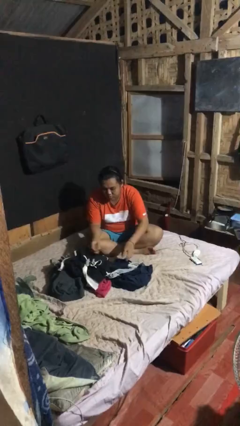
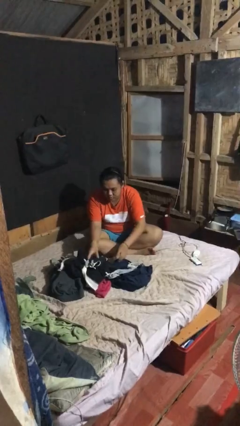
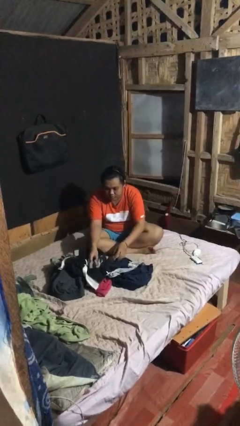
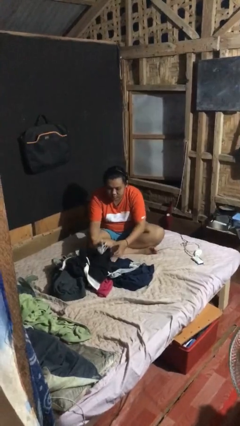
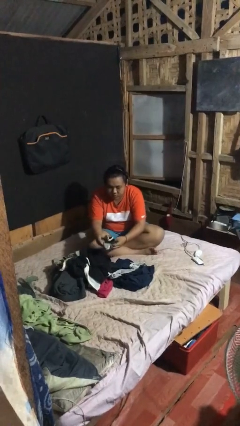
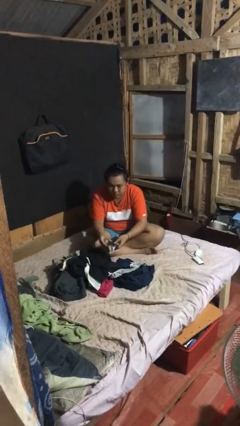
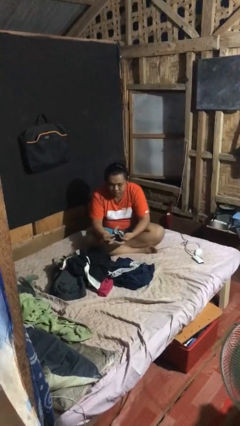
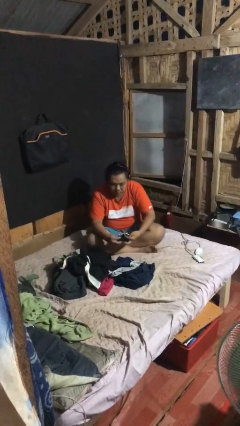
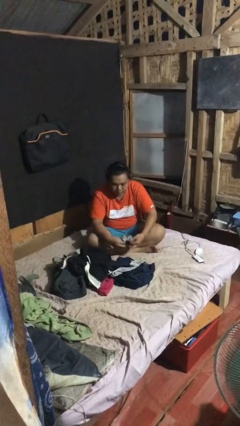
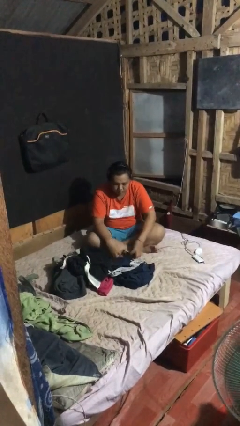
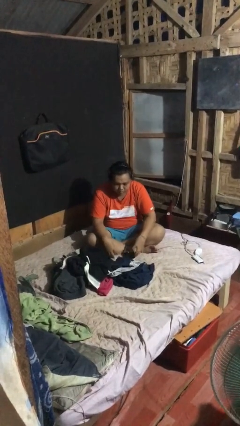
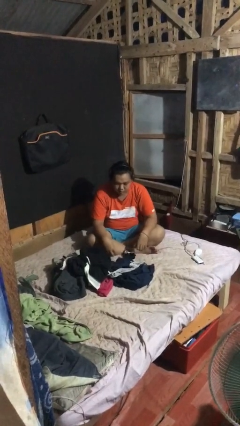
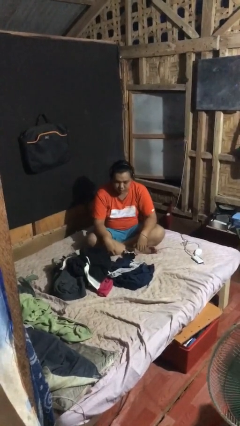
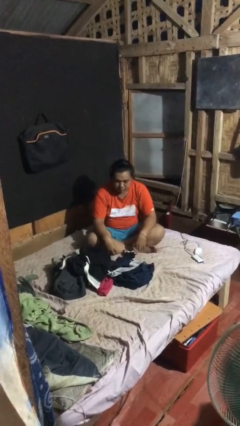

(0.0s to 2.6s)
person folds socks

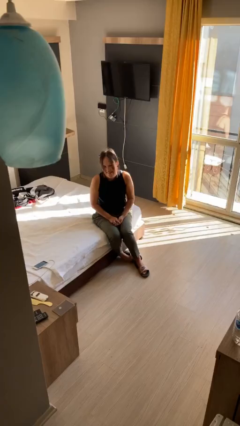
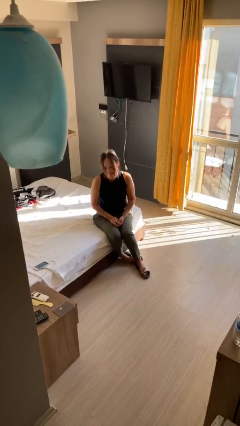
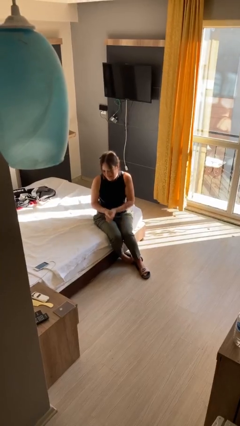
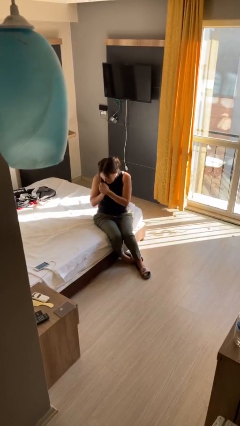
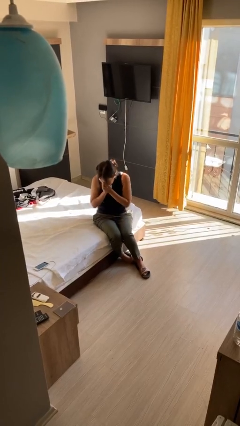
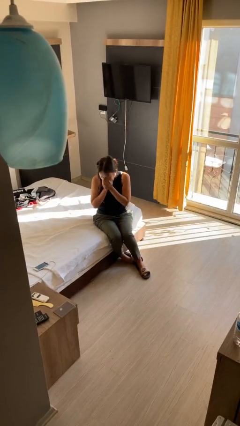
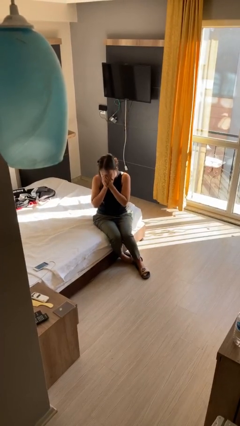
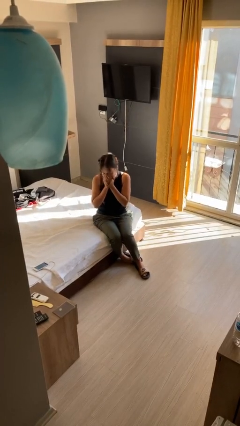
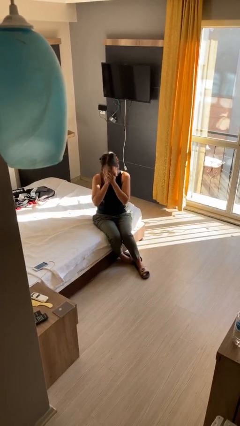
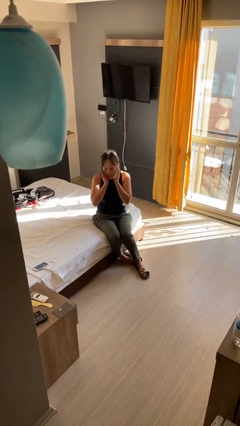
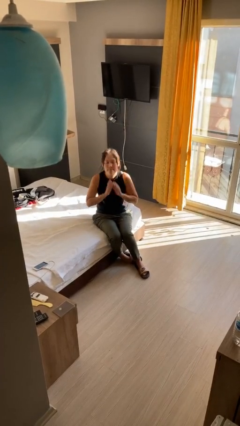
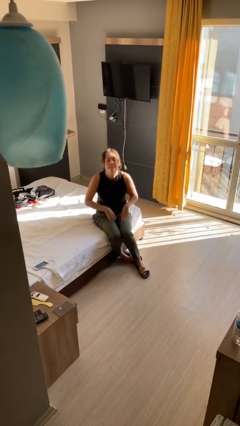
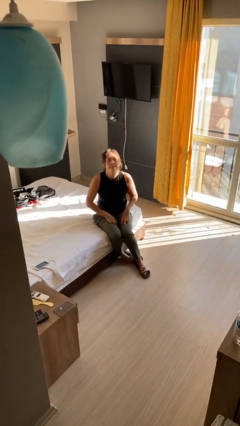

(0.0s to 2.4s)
person sneezes into hand

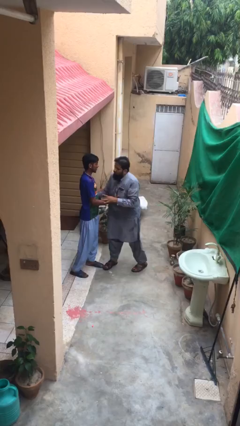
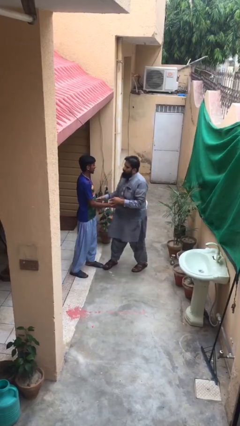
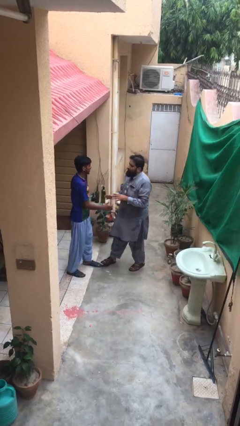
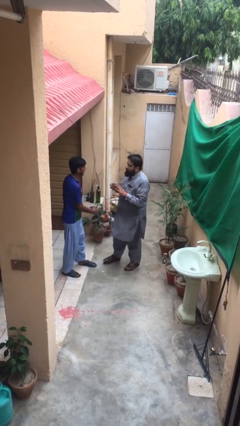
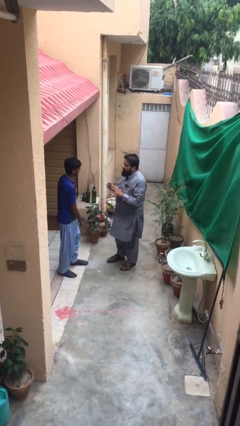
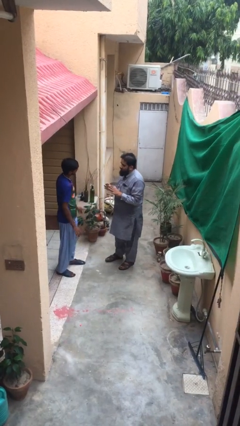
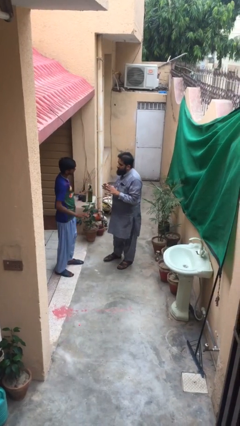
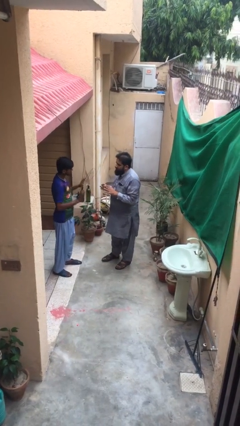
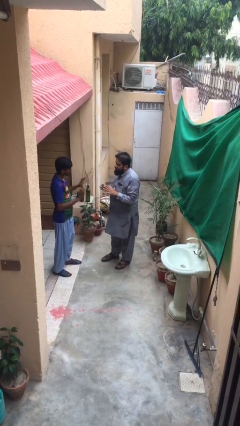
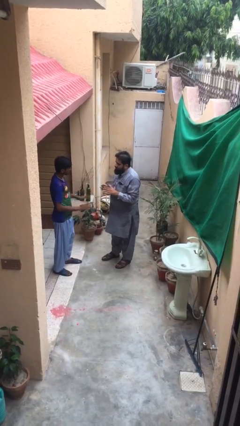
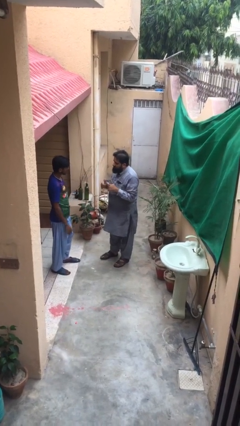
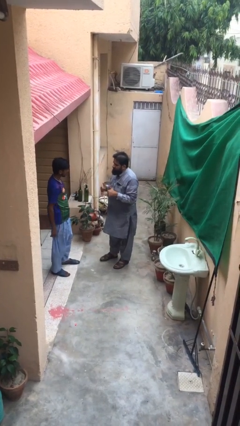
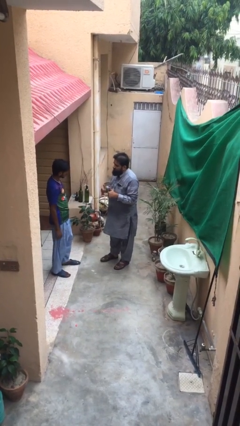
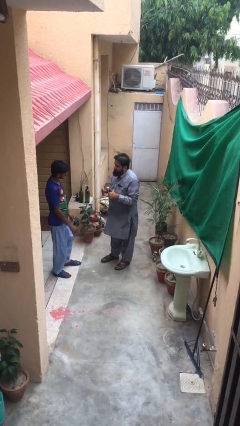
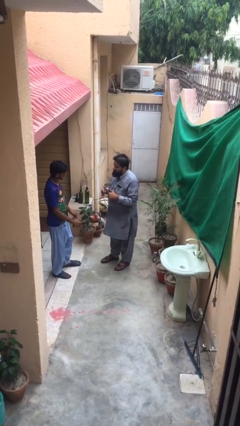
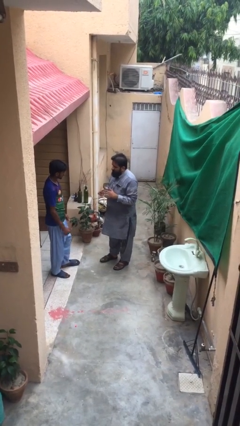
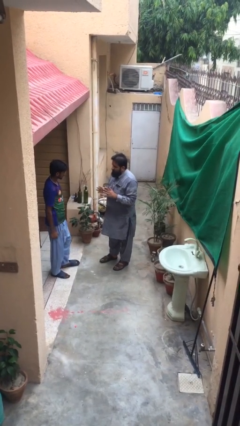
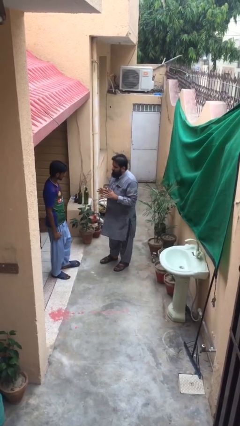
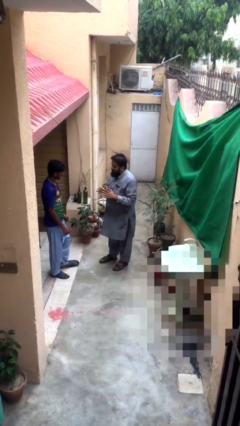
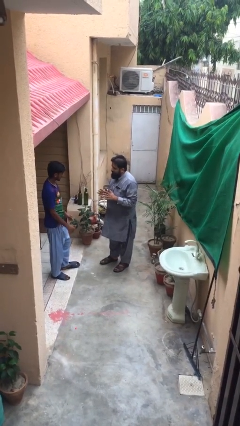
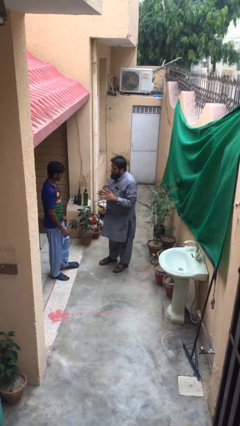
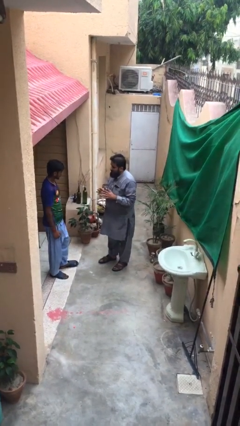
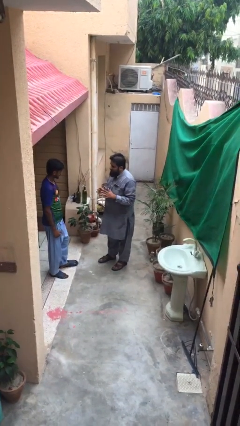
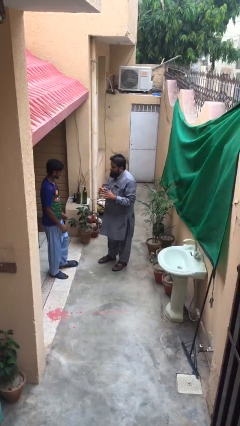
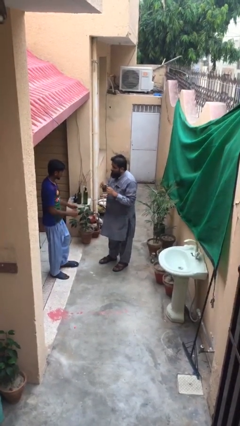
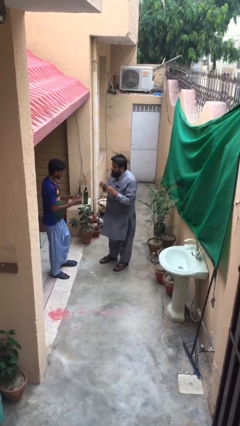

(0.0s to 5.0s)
person talks to person

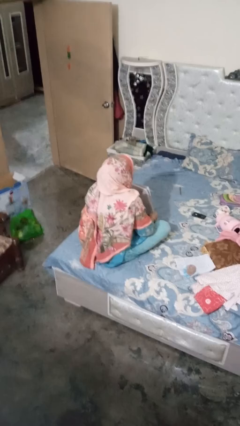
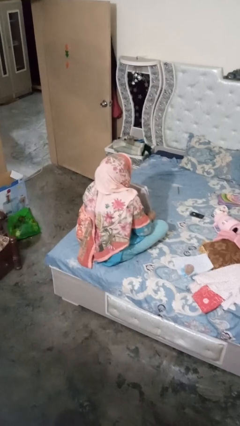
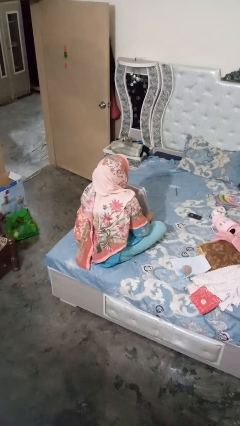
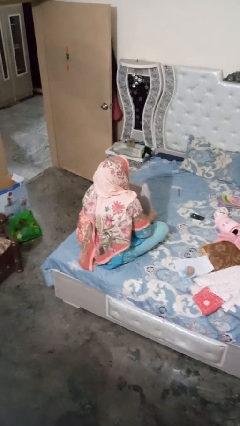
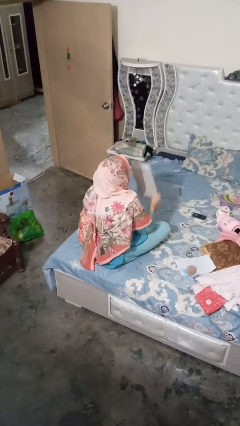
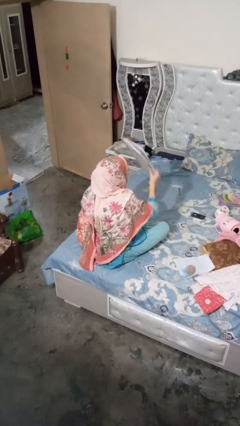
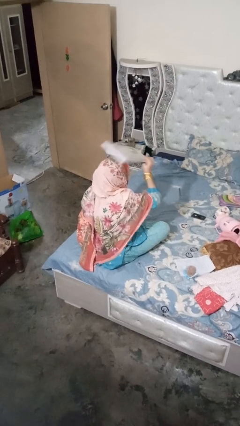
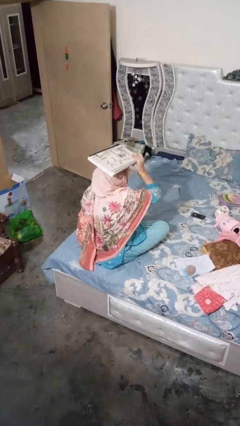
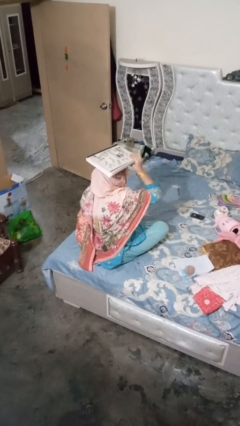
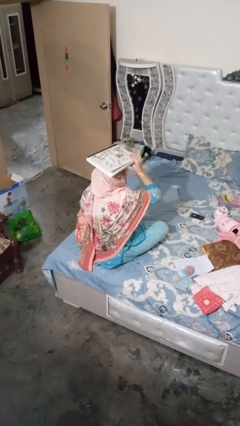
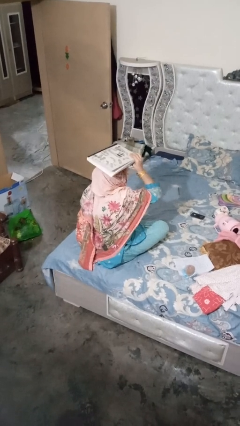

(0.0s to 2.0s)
person holds object above head

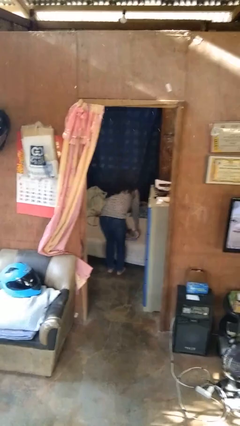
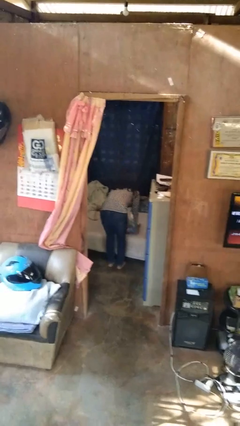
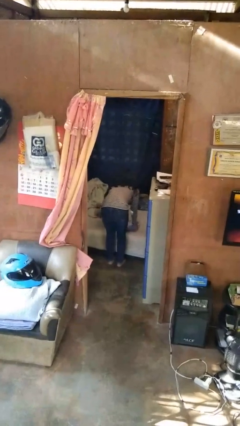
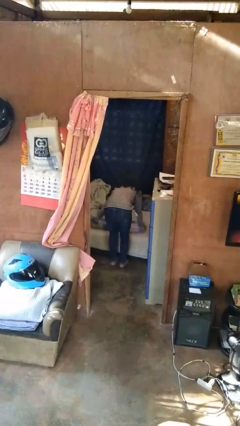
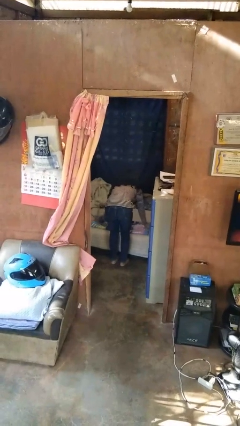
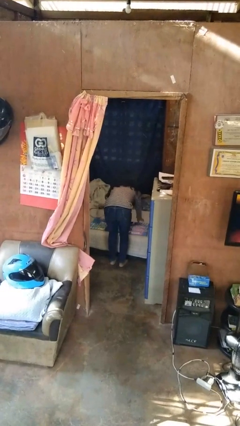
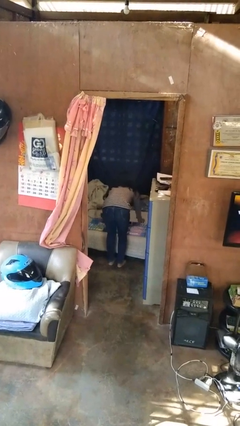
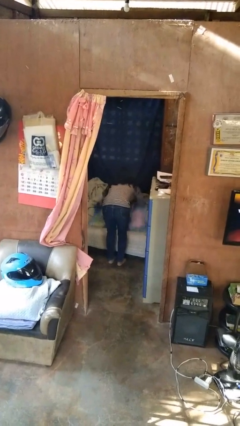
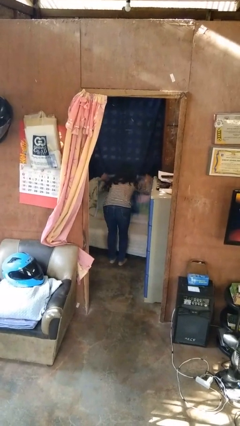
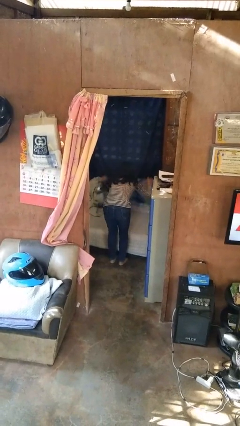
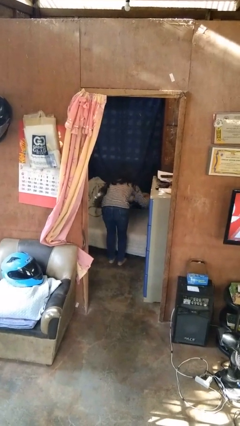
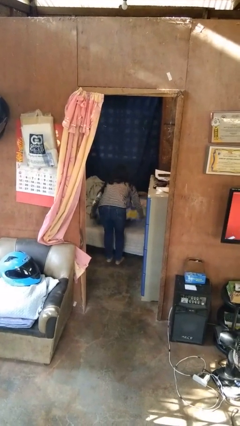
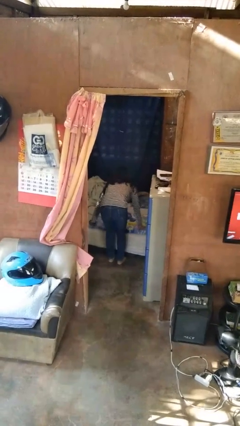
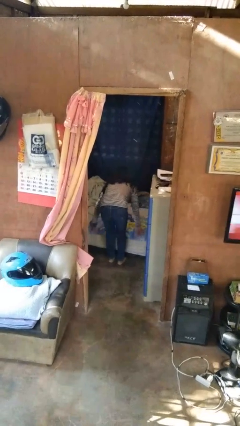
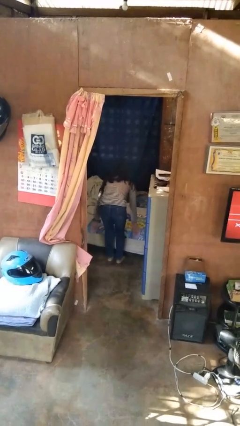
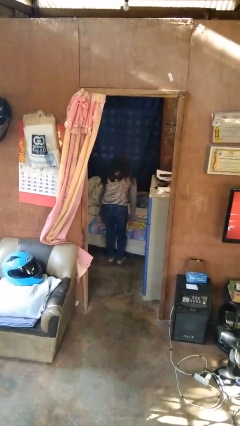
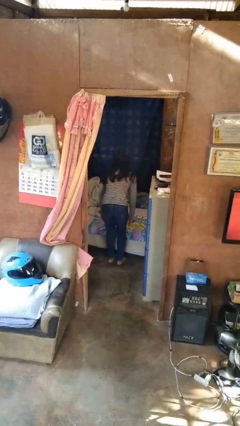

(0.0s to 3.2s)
person unfolds blanket

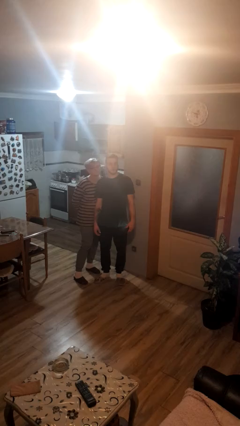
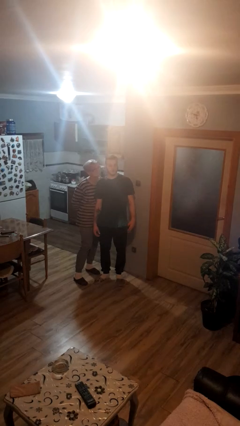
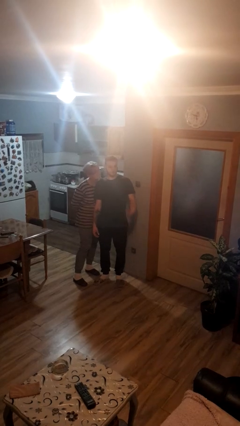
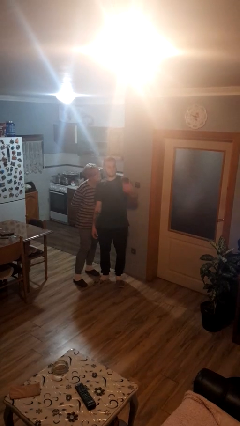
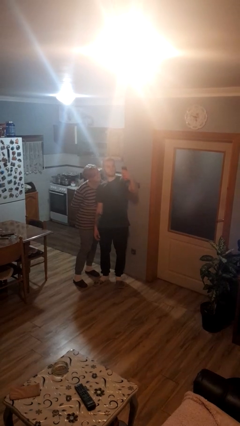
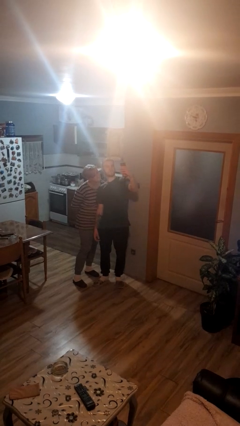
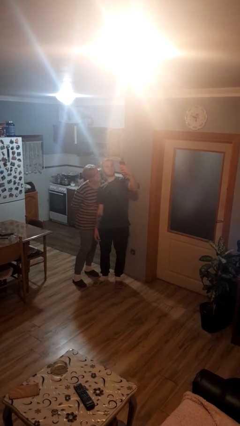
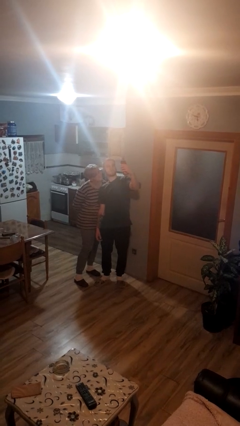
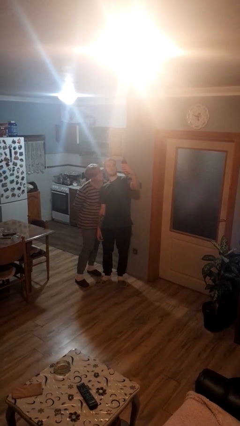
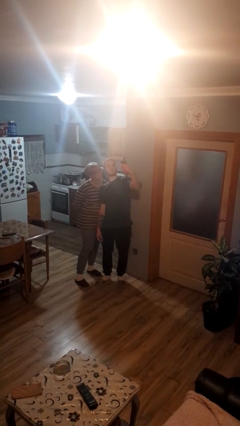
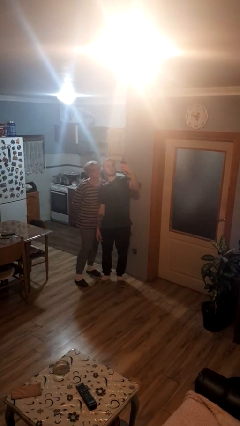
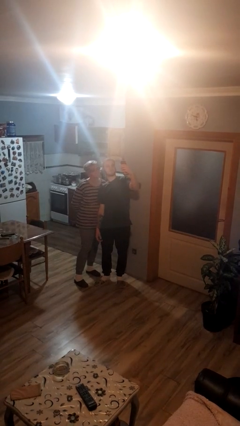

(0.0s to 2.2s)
person takes selfie with person
